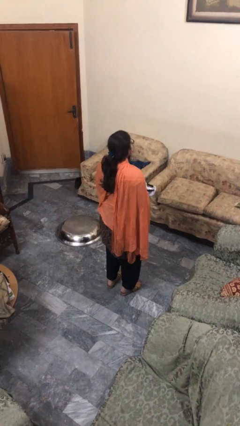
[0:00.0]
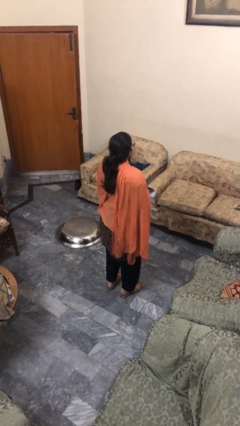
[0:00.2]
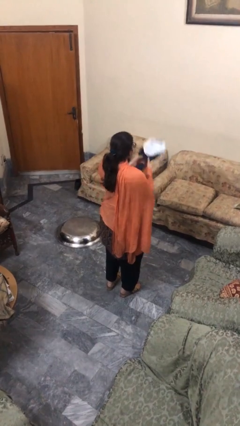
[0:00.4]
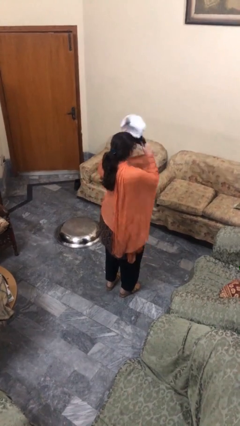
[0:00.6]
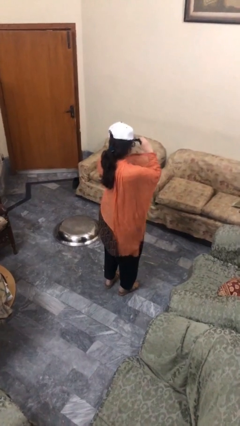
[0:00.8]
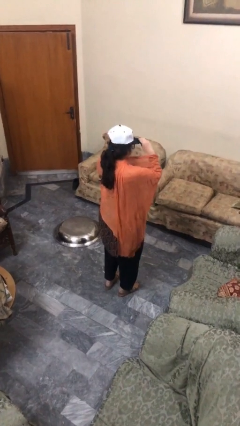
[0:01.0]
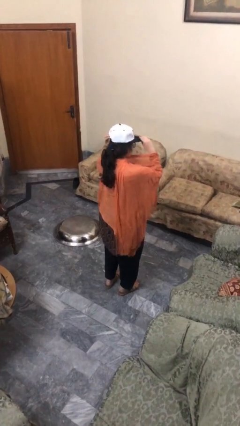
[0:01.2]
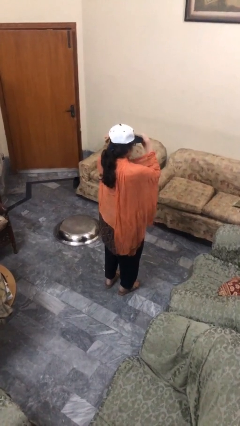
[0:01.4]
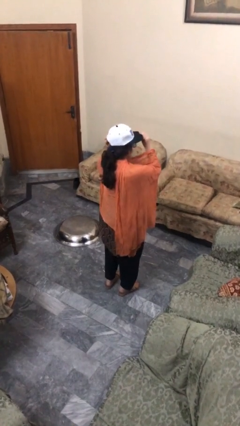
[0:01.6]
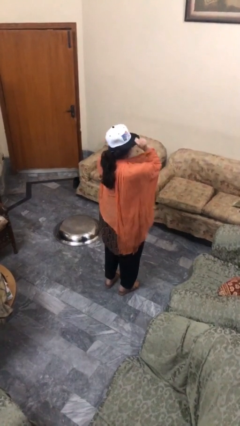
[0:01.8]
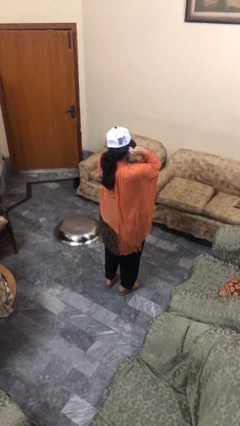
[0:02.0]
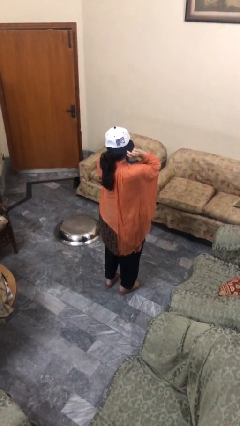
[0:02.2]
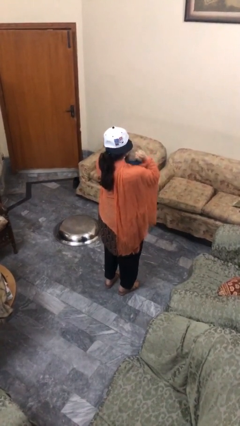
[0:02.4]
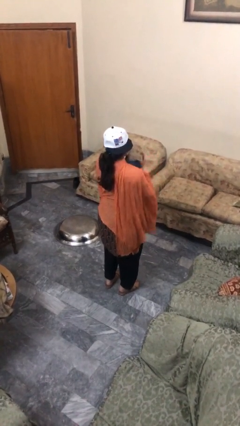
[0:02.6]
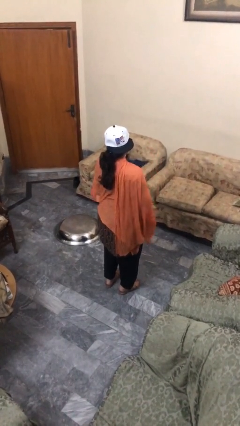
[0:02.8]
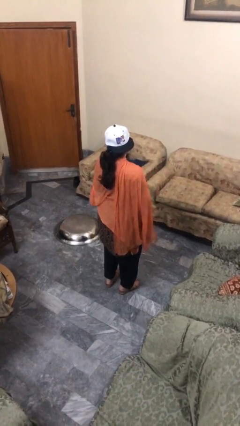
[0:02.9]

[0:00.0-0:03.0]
person puts on hat

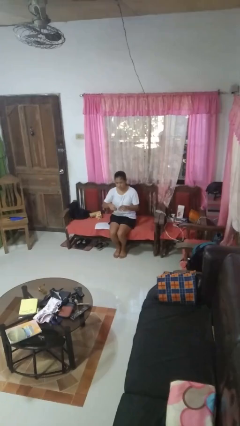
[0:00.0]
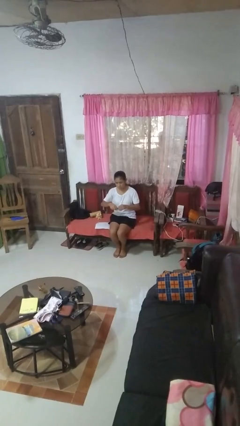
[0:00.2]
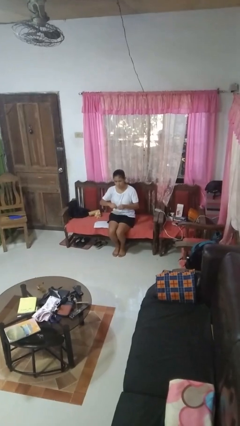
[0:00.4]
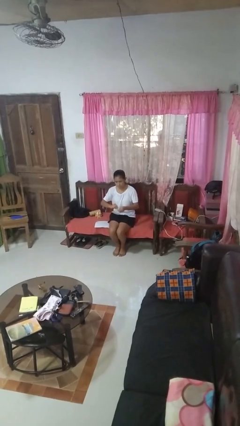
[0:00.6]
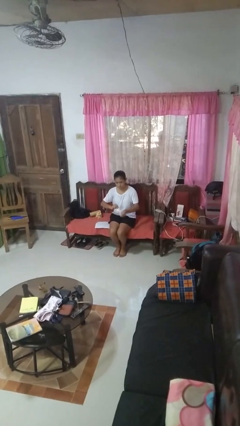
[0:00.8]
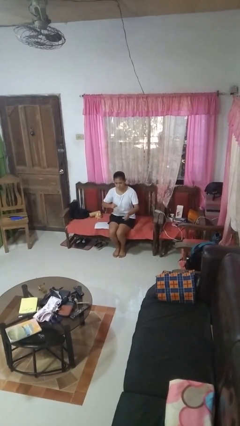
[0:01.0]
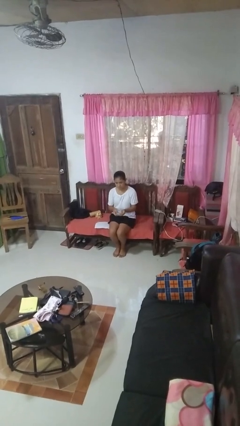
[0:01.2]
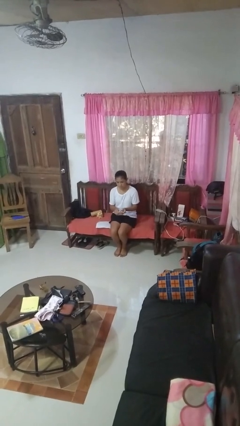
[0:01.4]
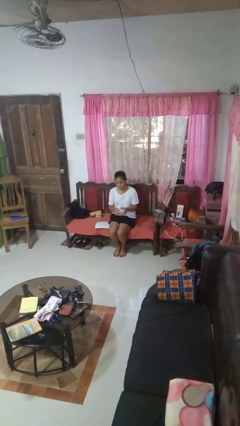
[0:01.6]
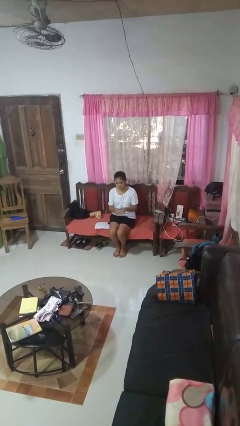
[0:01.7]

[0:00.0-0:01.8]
person tears paper

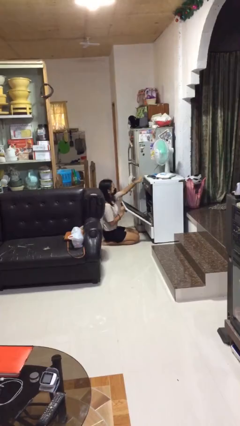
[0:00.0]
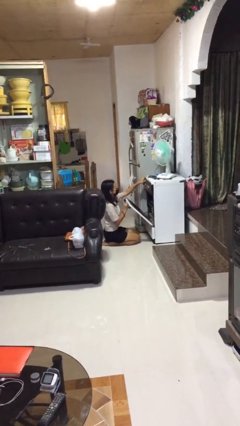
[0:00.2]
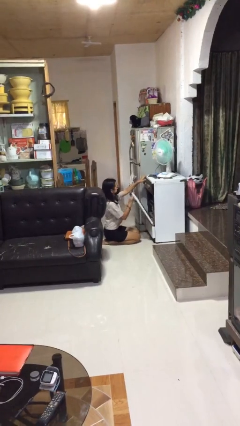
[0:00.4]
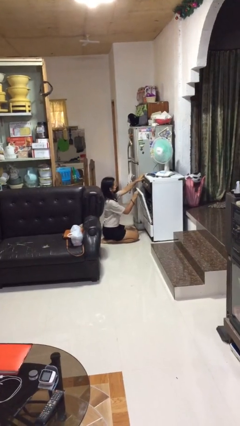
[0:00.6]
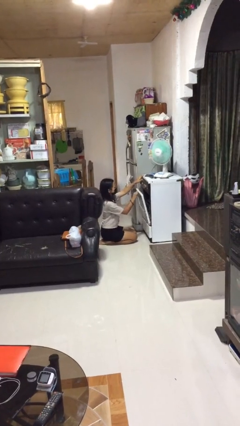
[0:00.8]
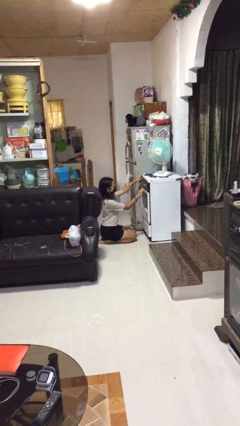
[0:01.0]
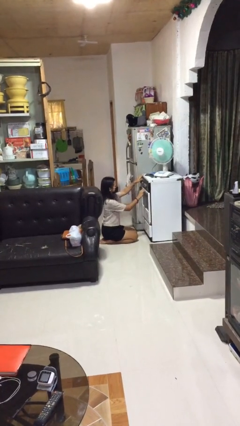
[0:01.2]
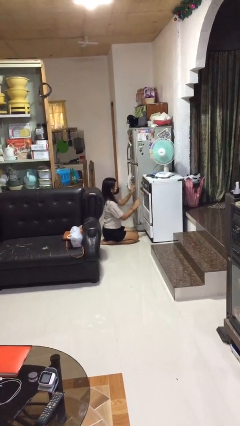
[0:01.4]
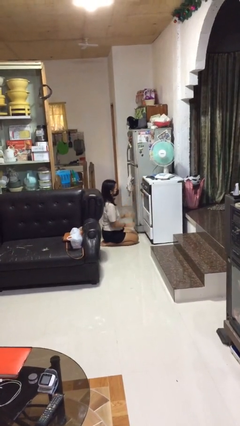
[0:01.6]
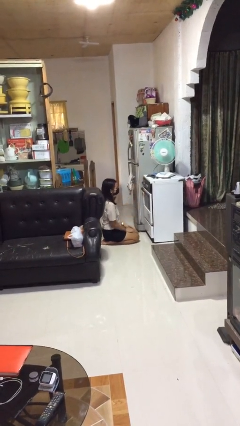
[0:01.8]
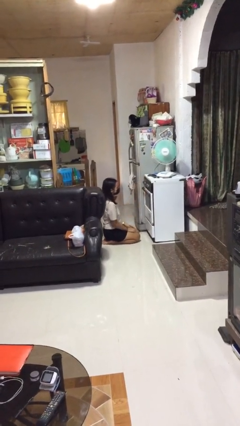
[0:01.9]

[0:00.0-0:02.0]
person closes oven door

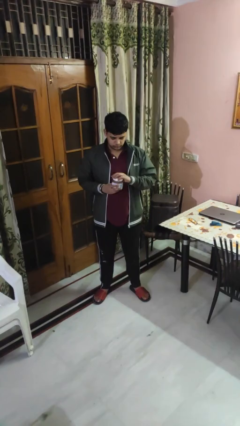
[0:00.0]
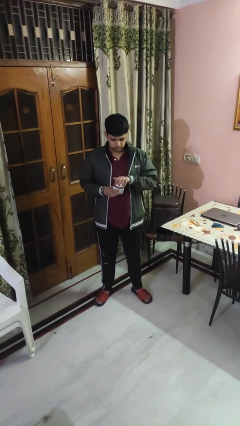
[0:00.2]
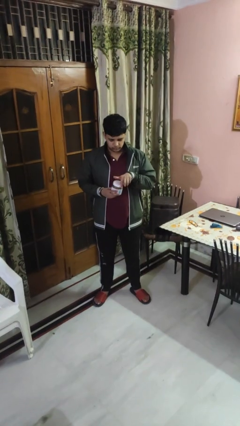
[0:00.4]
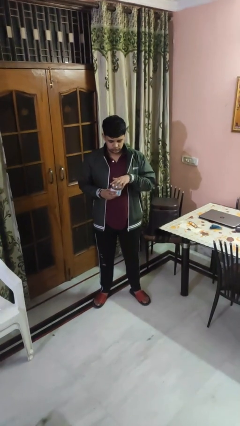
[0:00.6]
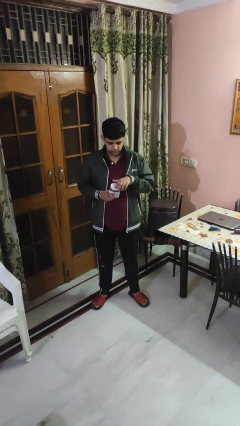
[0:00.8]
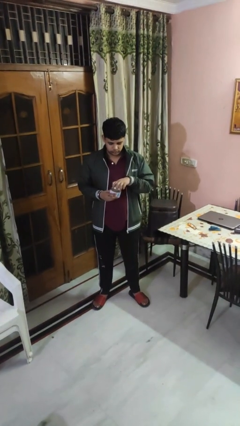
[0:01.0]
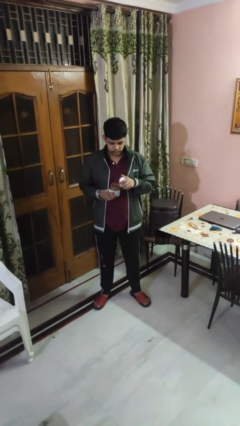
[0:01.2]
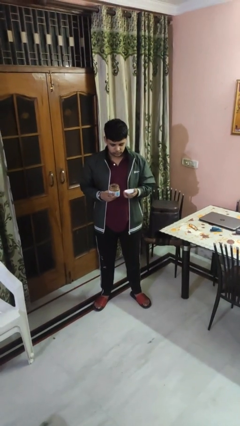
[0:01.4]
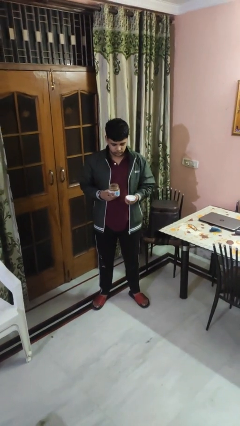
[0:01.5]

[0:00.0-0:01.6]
person opens jar

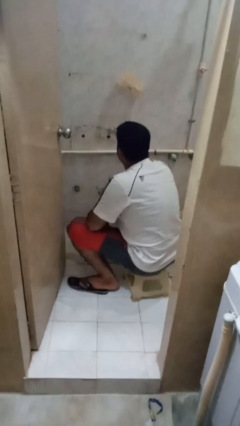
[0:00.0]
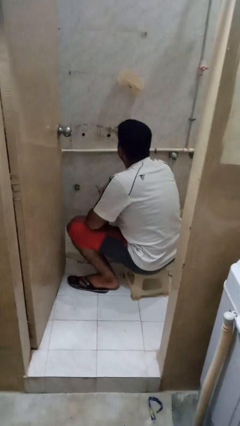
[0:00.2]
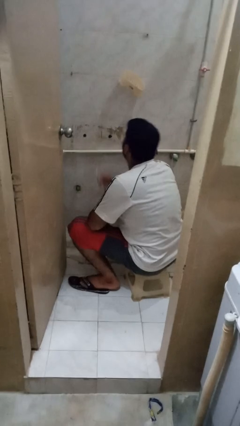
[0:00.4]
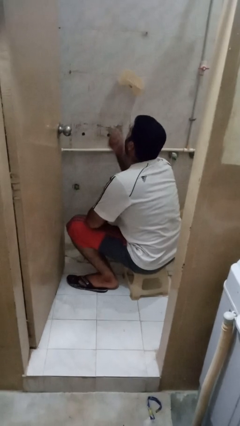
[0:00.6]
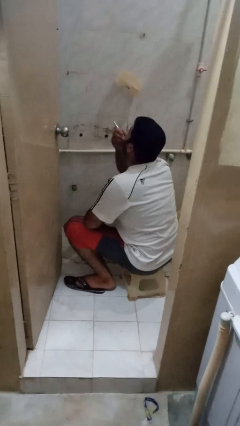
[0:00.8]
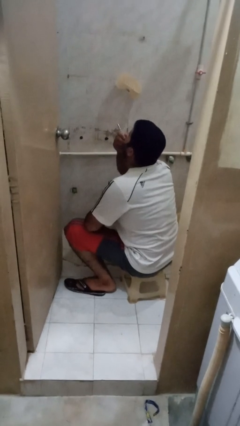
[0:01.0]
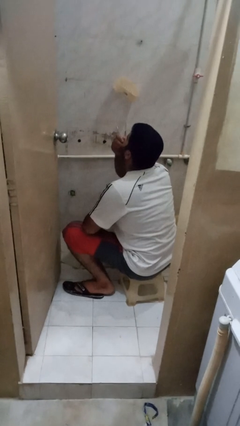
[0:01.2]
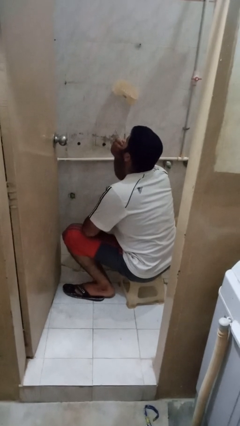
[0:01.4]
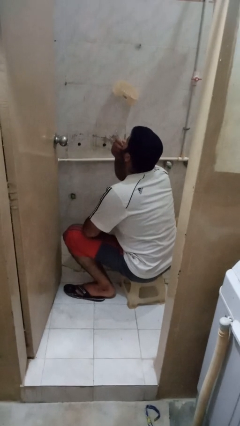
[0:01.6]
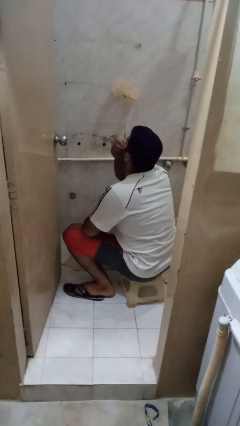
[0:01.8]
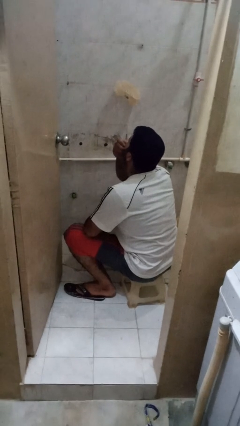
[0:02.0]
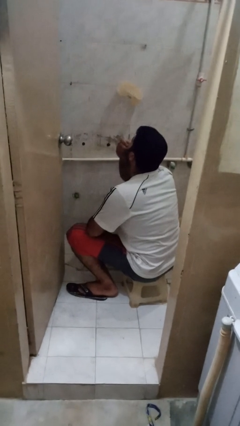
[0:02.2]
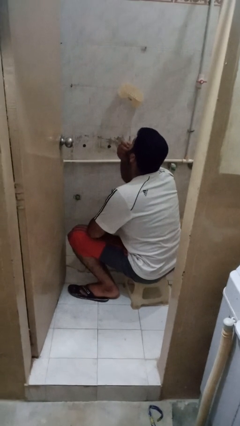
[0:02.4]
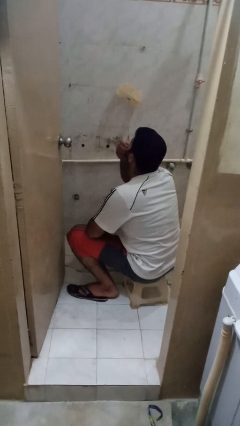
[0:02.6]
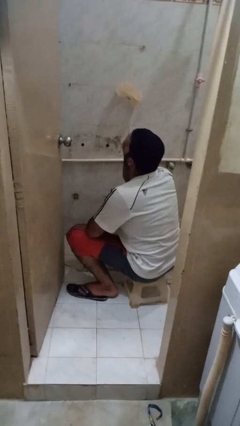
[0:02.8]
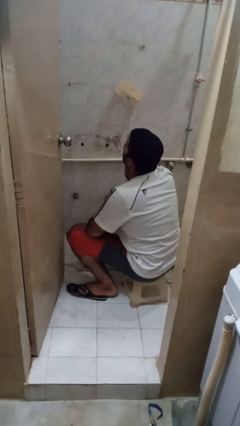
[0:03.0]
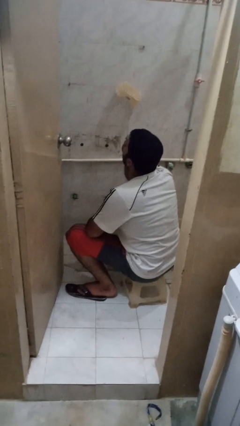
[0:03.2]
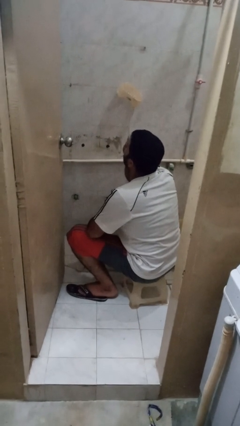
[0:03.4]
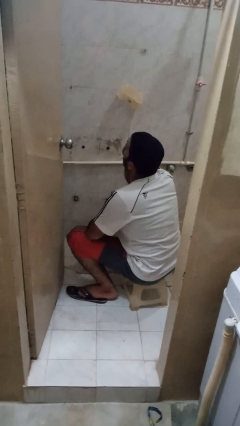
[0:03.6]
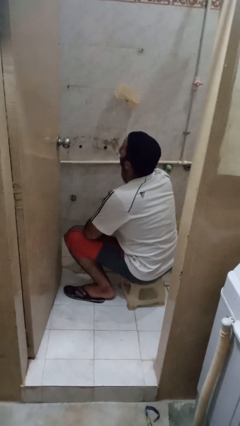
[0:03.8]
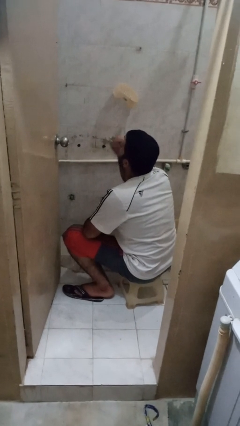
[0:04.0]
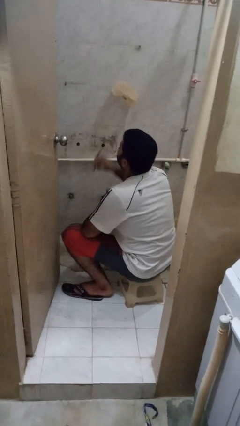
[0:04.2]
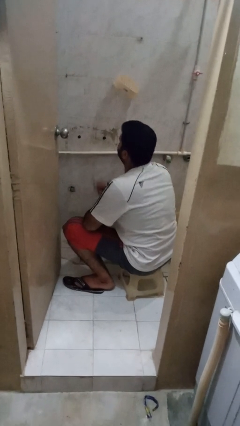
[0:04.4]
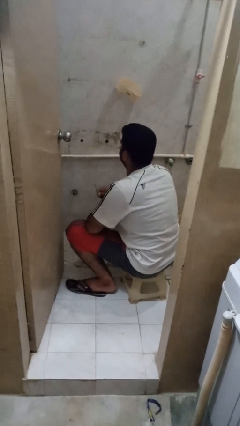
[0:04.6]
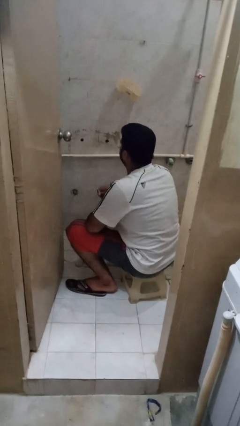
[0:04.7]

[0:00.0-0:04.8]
person flosses

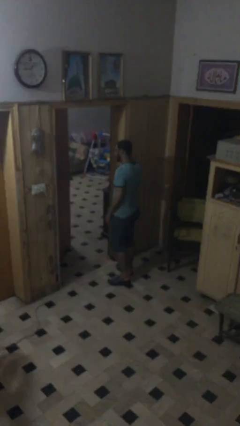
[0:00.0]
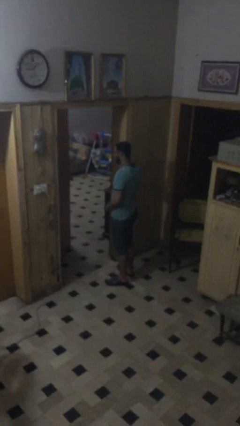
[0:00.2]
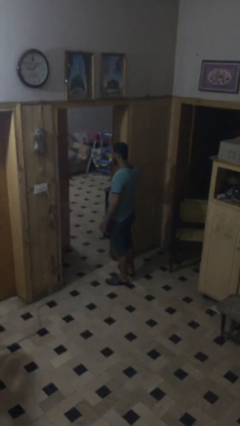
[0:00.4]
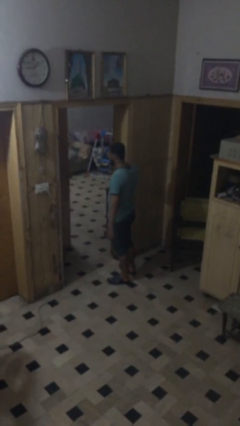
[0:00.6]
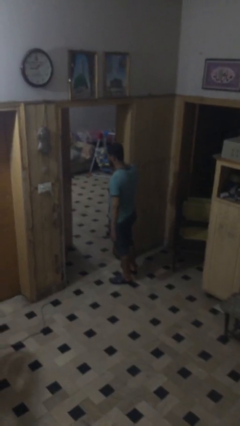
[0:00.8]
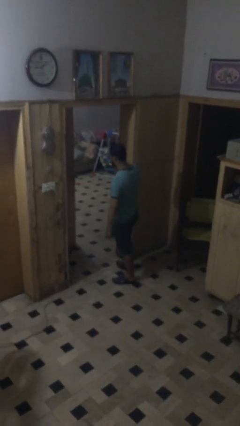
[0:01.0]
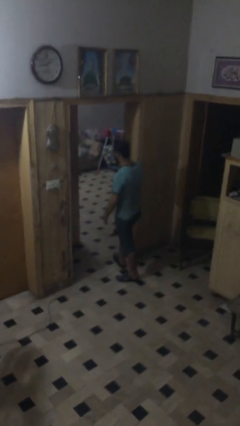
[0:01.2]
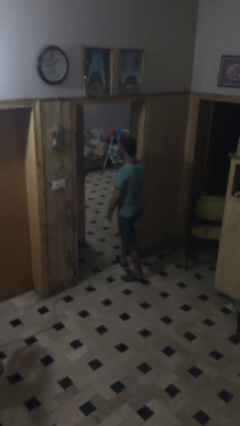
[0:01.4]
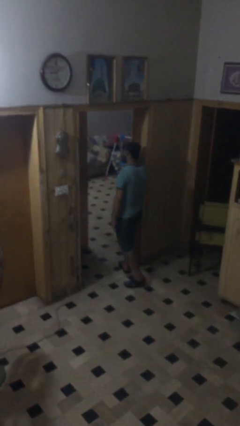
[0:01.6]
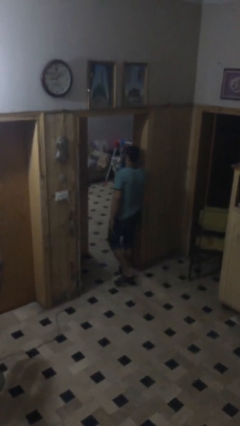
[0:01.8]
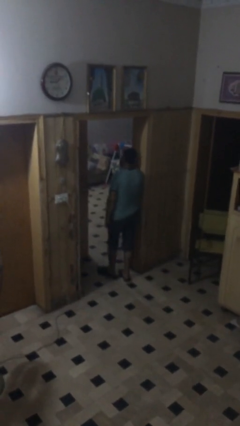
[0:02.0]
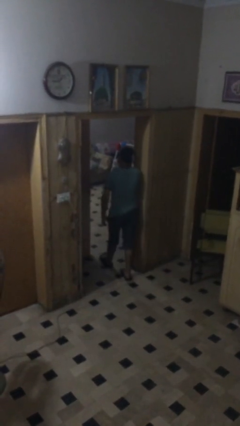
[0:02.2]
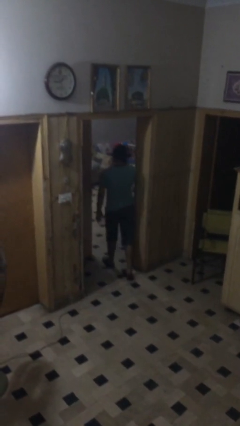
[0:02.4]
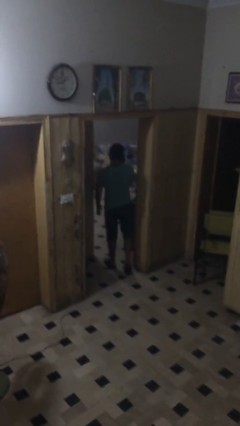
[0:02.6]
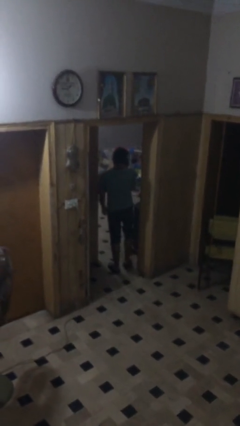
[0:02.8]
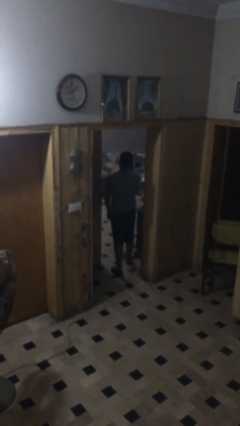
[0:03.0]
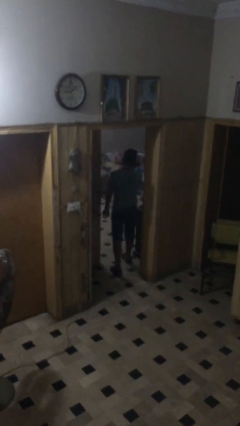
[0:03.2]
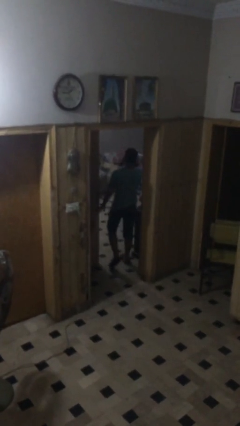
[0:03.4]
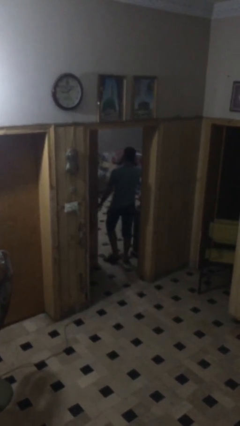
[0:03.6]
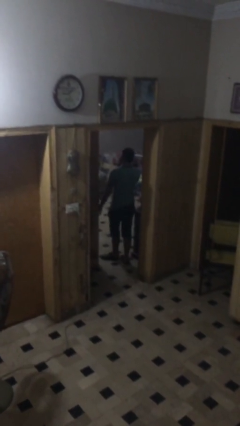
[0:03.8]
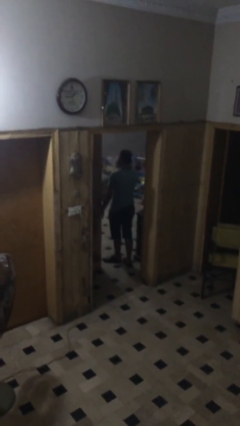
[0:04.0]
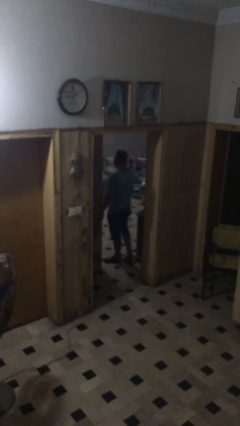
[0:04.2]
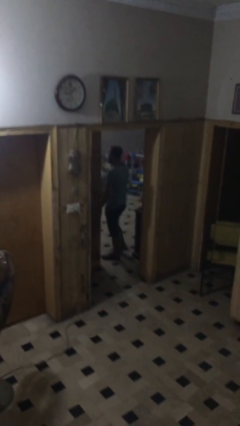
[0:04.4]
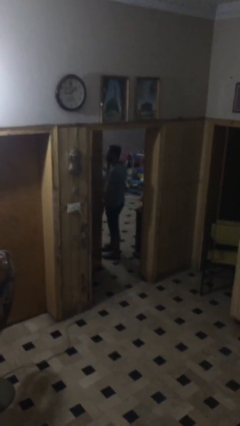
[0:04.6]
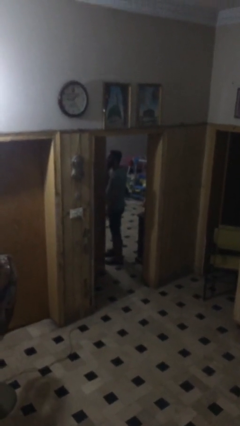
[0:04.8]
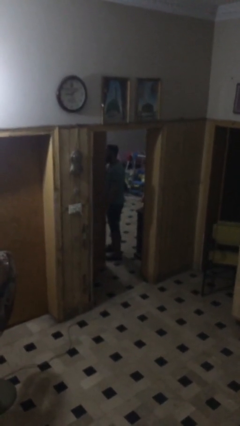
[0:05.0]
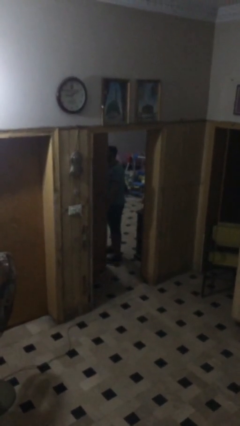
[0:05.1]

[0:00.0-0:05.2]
person exits scene through structure
